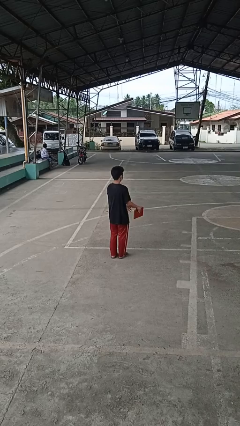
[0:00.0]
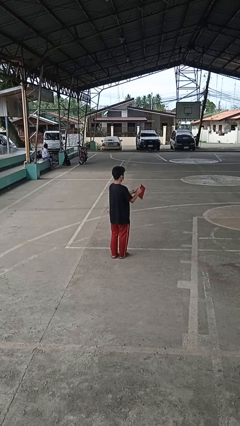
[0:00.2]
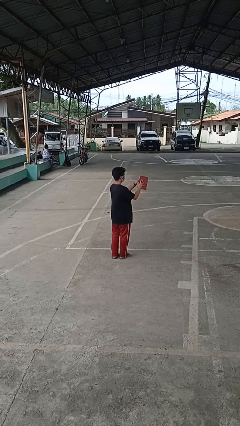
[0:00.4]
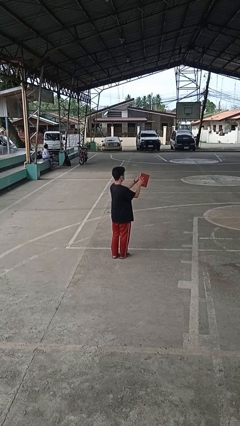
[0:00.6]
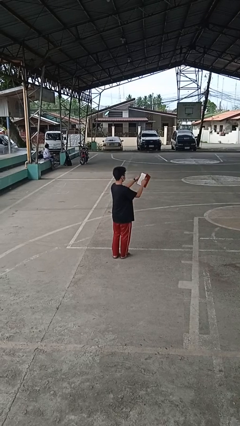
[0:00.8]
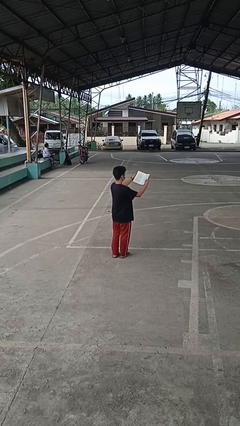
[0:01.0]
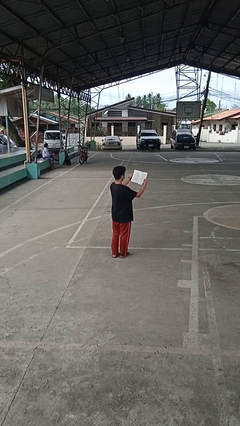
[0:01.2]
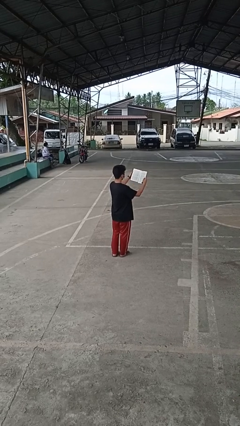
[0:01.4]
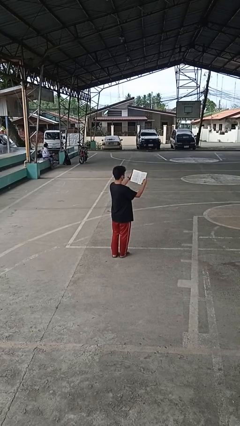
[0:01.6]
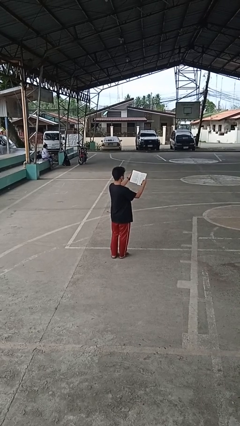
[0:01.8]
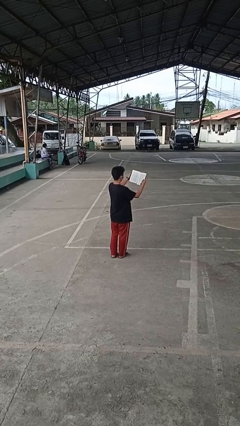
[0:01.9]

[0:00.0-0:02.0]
person reads book

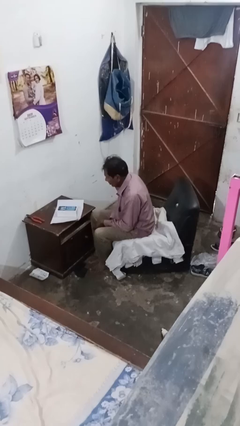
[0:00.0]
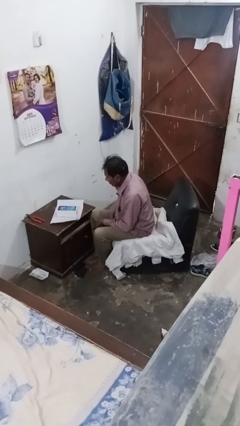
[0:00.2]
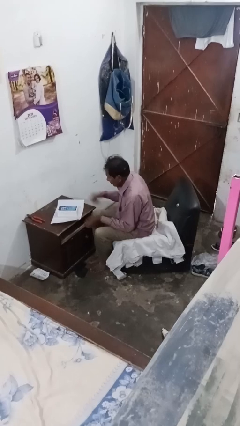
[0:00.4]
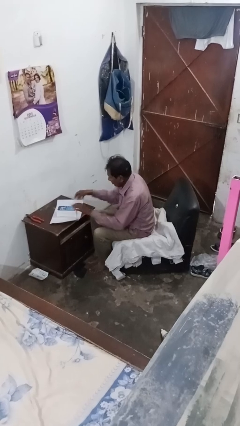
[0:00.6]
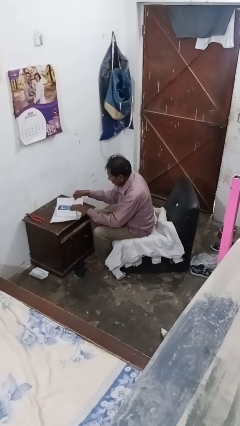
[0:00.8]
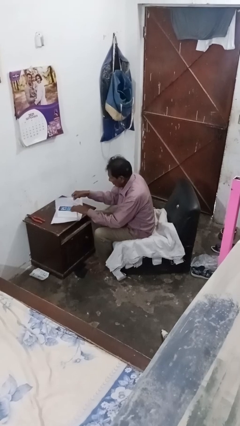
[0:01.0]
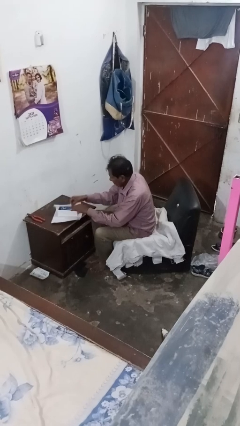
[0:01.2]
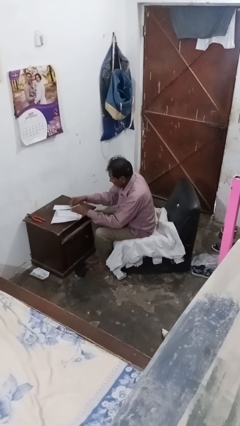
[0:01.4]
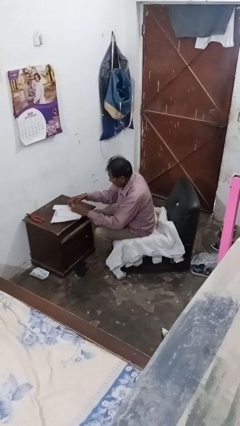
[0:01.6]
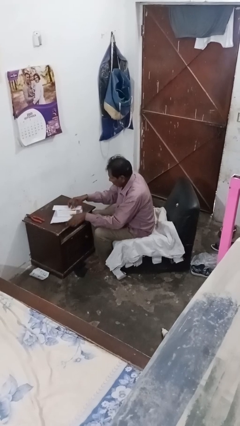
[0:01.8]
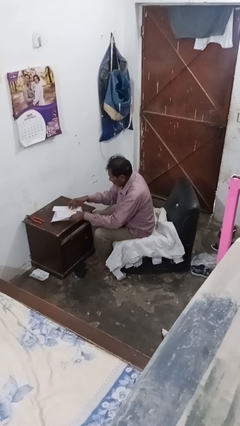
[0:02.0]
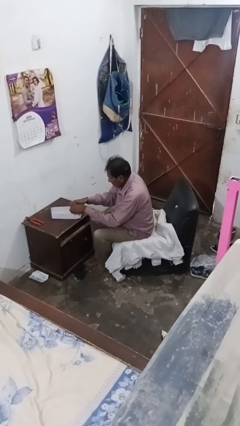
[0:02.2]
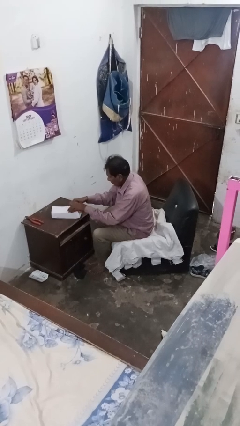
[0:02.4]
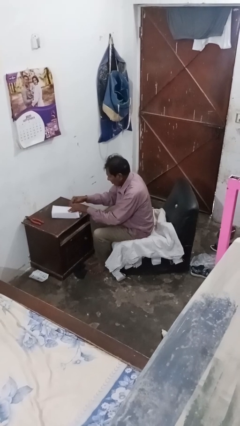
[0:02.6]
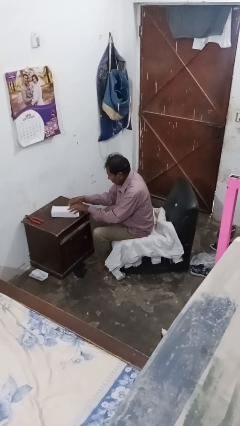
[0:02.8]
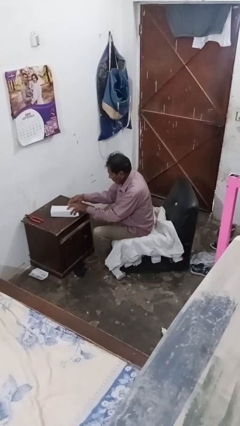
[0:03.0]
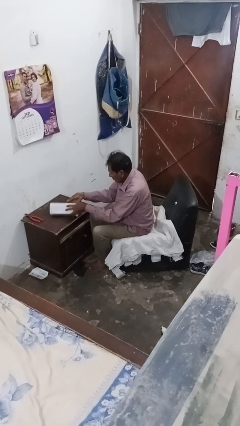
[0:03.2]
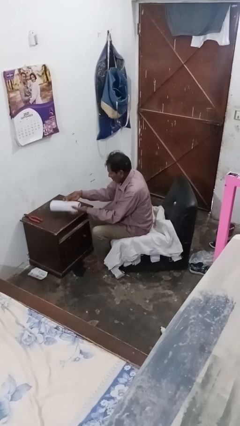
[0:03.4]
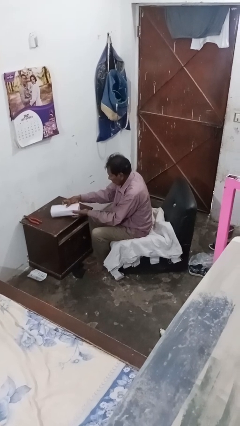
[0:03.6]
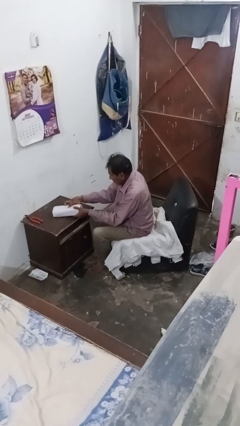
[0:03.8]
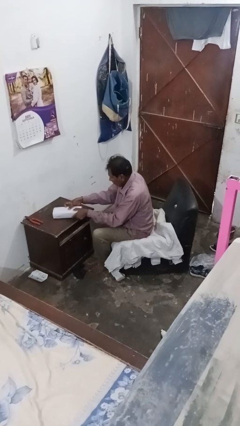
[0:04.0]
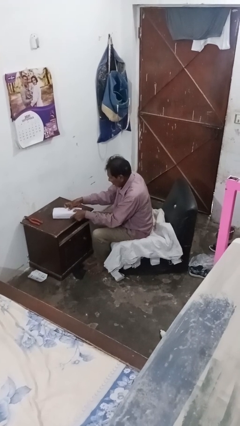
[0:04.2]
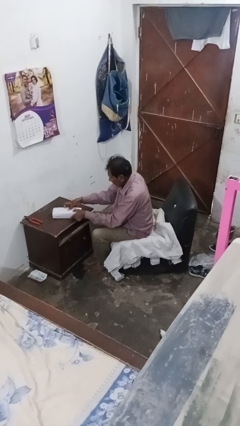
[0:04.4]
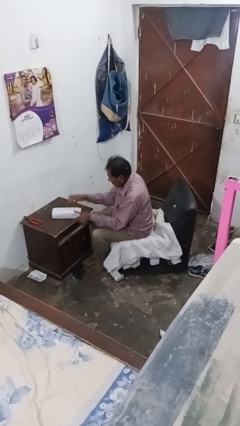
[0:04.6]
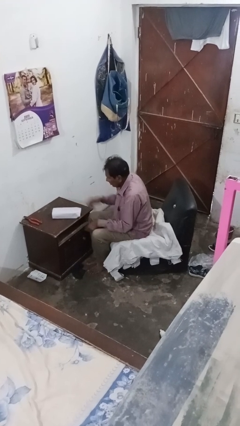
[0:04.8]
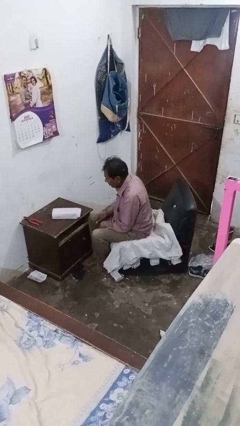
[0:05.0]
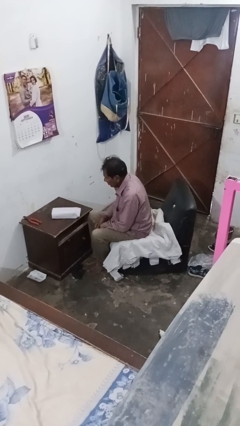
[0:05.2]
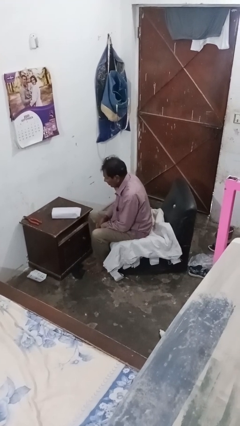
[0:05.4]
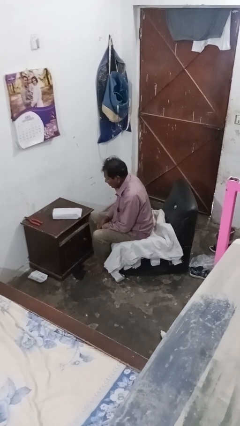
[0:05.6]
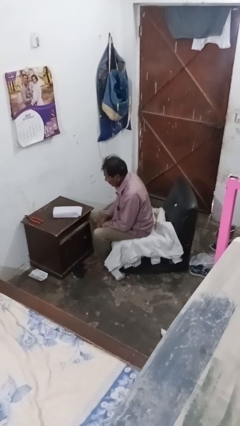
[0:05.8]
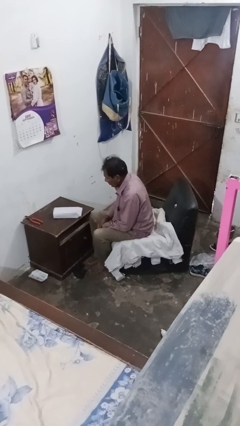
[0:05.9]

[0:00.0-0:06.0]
person wraps box

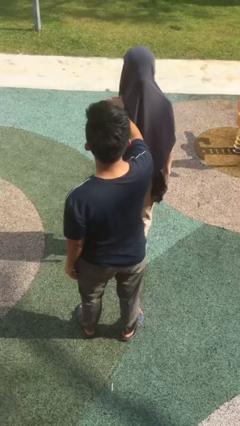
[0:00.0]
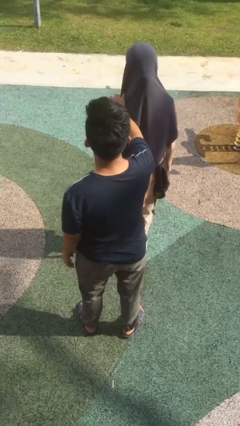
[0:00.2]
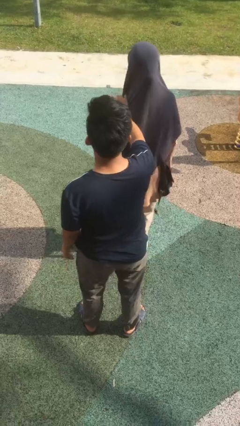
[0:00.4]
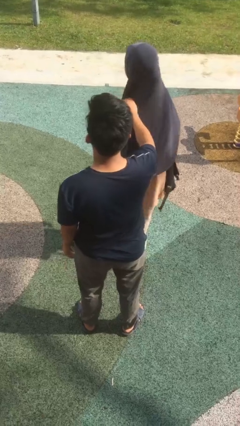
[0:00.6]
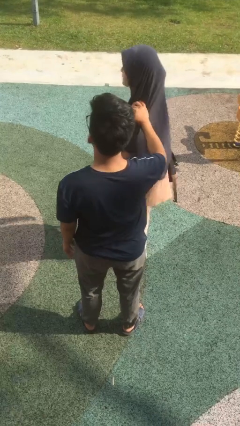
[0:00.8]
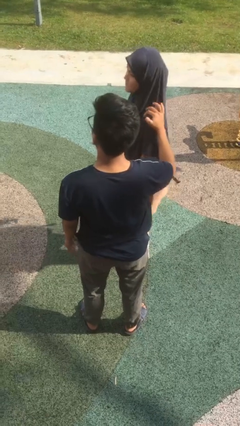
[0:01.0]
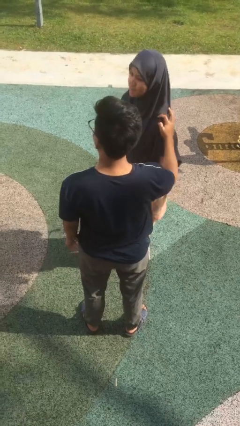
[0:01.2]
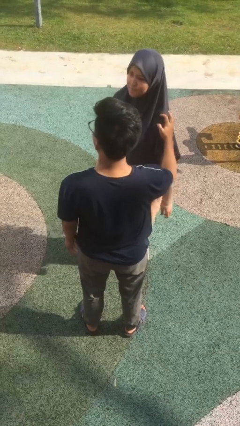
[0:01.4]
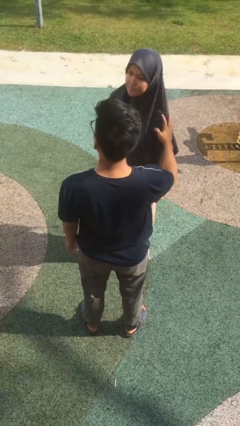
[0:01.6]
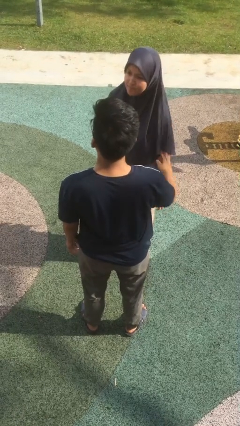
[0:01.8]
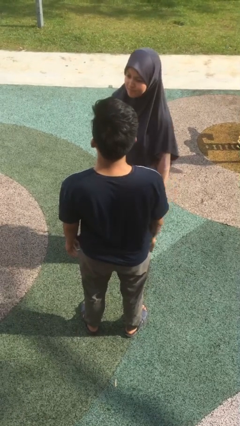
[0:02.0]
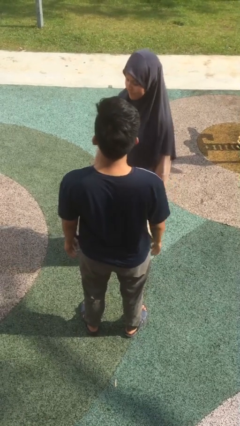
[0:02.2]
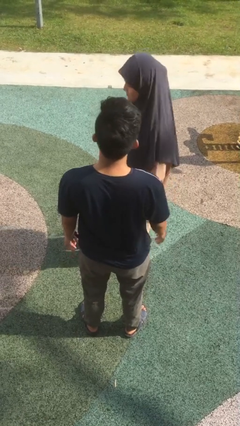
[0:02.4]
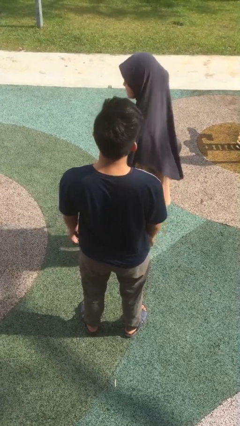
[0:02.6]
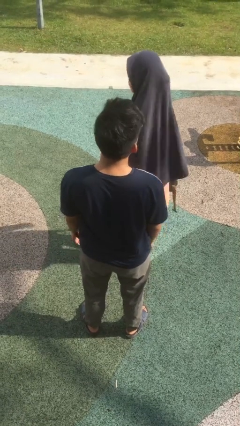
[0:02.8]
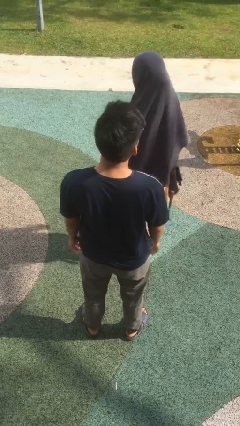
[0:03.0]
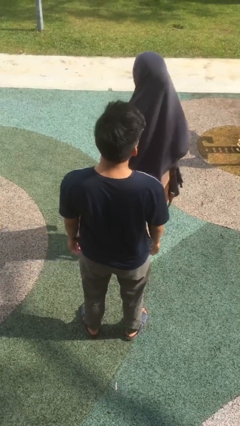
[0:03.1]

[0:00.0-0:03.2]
person spins person around

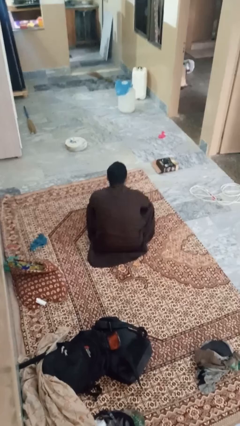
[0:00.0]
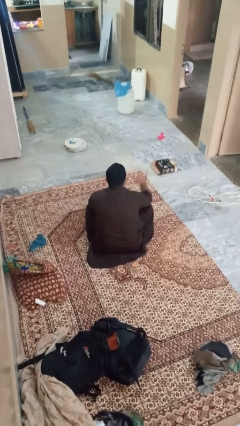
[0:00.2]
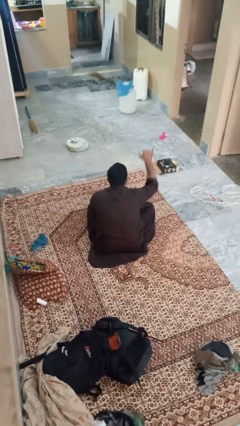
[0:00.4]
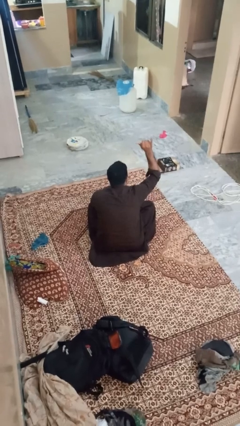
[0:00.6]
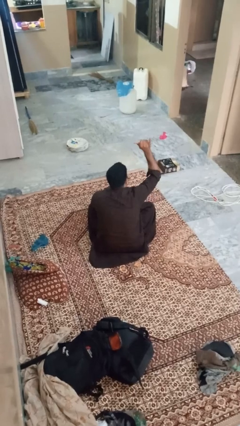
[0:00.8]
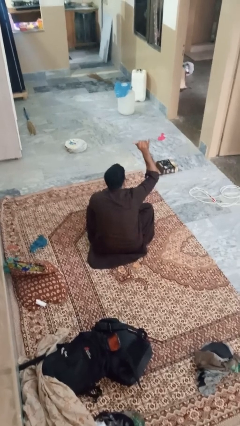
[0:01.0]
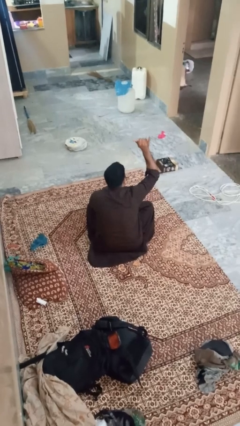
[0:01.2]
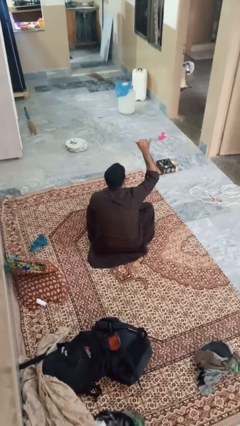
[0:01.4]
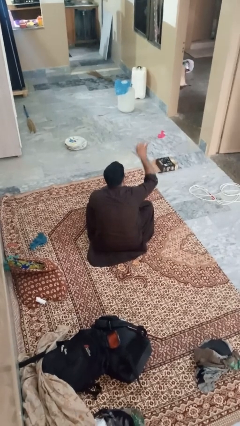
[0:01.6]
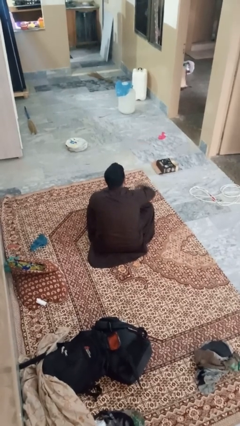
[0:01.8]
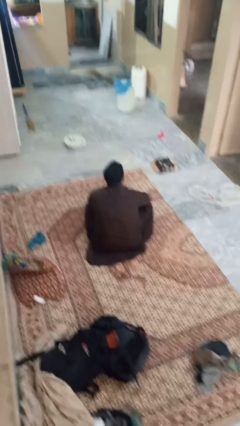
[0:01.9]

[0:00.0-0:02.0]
person gestures hang loose

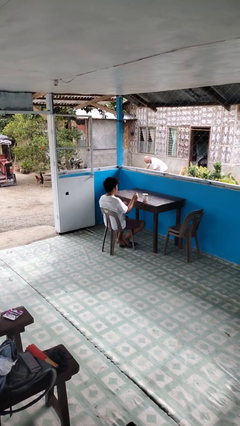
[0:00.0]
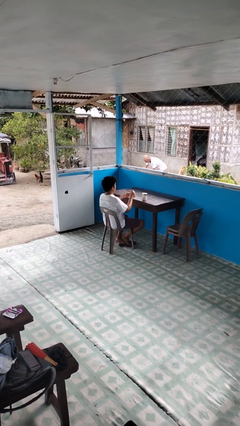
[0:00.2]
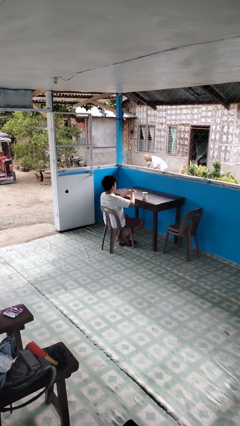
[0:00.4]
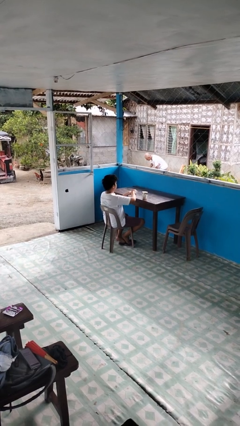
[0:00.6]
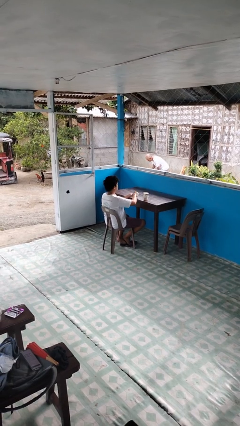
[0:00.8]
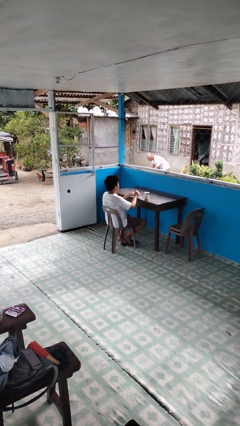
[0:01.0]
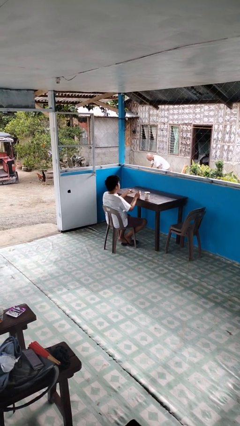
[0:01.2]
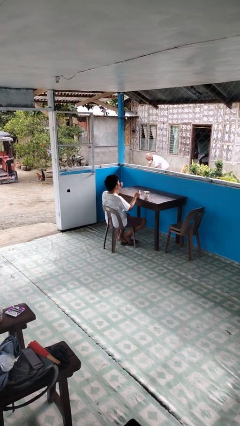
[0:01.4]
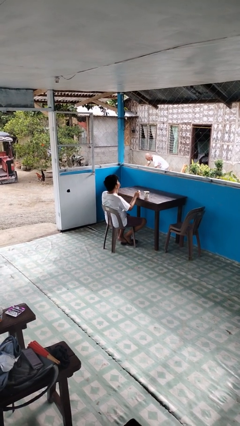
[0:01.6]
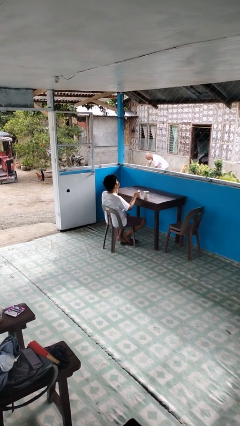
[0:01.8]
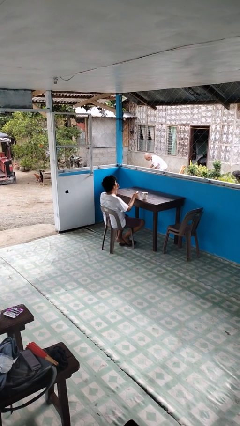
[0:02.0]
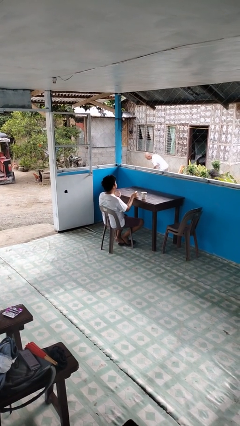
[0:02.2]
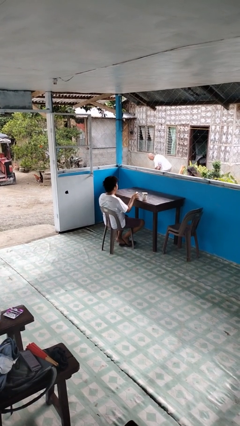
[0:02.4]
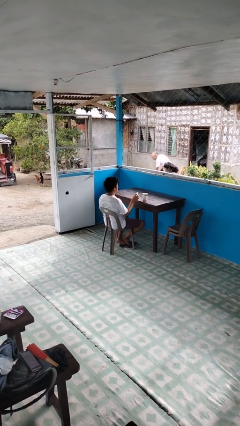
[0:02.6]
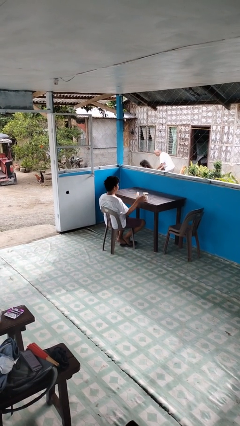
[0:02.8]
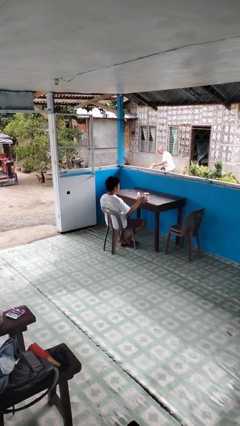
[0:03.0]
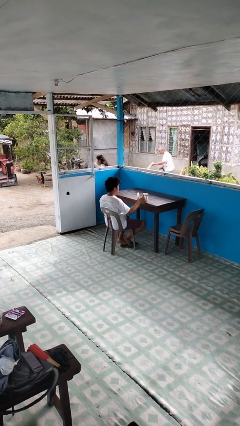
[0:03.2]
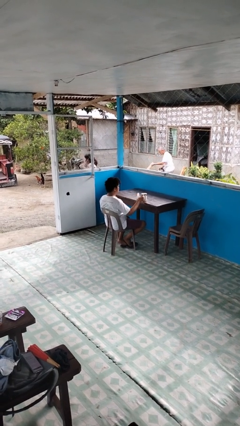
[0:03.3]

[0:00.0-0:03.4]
person takes medicine pills

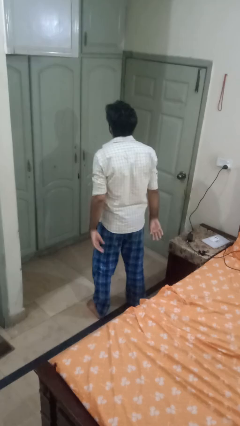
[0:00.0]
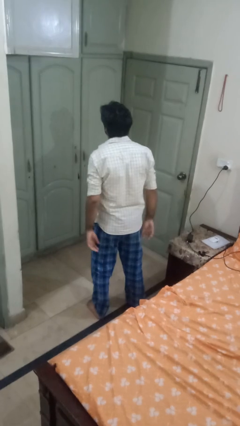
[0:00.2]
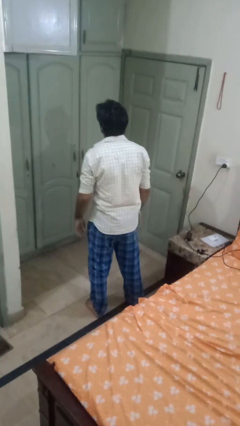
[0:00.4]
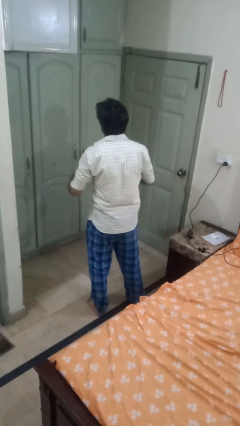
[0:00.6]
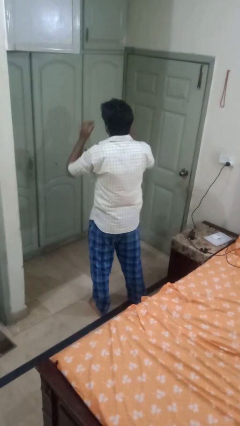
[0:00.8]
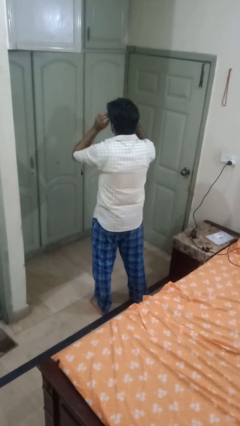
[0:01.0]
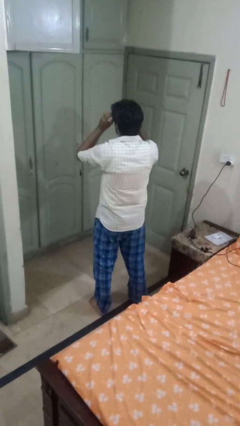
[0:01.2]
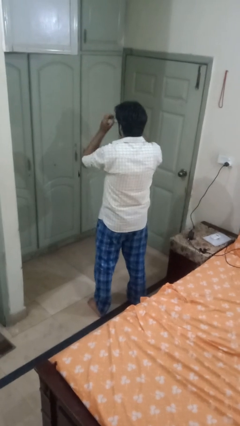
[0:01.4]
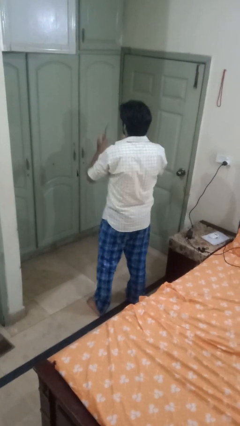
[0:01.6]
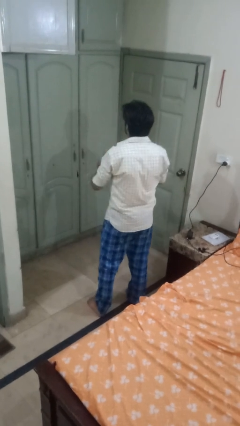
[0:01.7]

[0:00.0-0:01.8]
person takes off glasses
